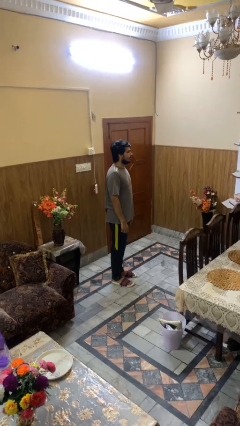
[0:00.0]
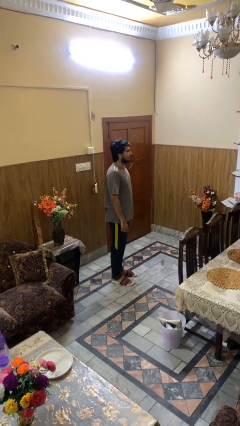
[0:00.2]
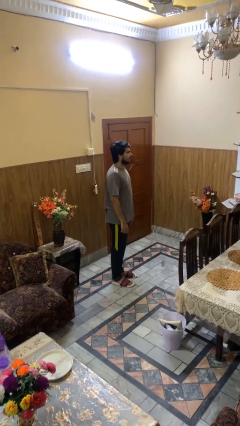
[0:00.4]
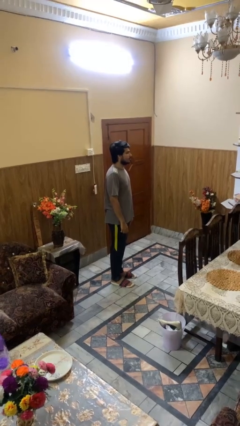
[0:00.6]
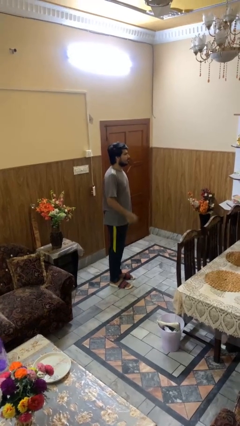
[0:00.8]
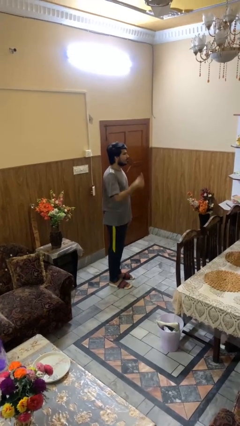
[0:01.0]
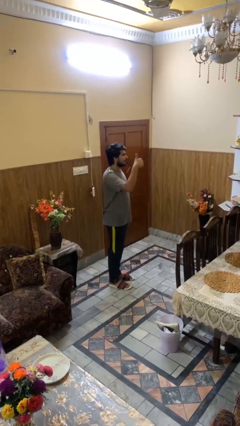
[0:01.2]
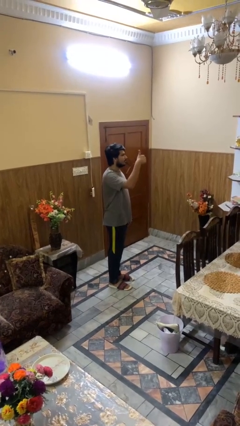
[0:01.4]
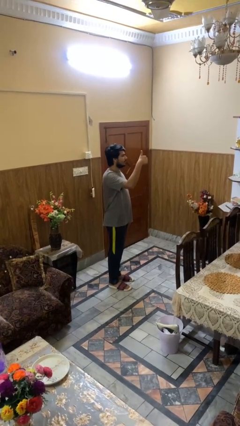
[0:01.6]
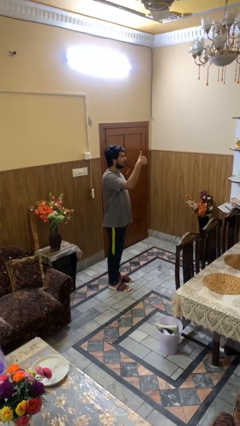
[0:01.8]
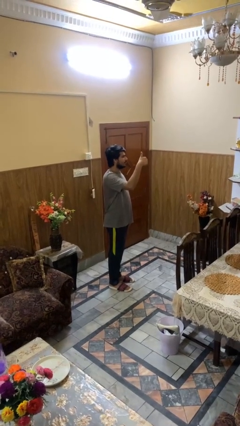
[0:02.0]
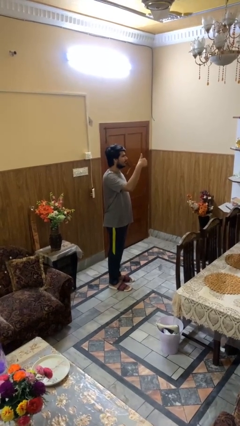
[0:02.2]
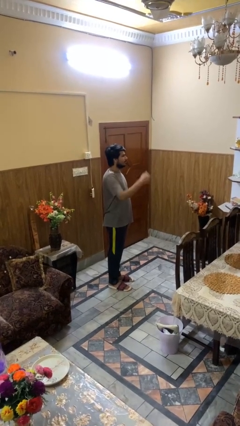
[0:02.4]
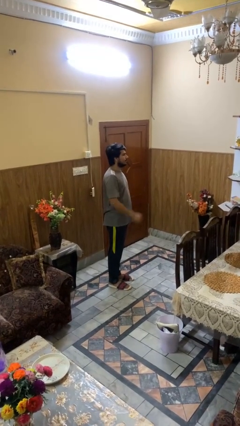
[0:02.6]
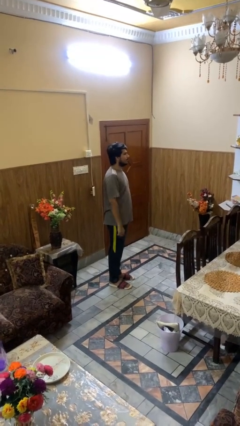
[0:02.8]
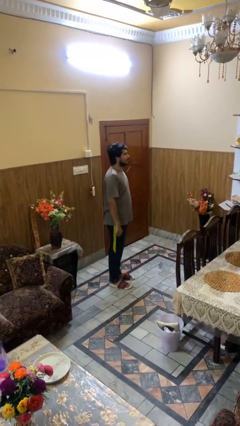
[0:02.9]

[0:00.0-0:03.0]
person gestures thumbs up

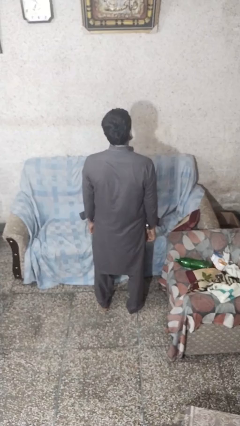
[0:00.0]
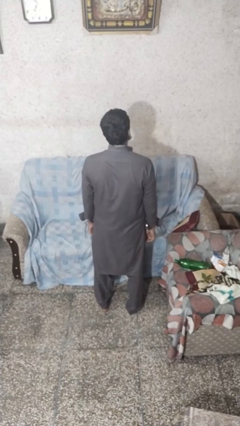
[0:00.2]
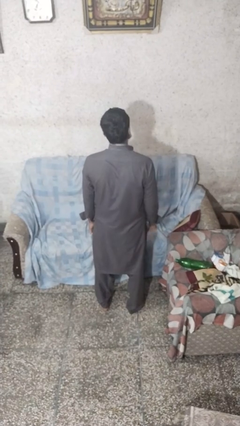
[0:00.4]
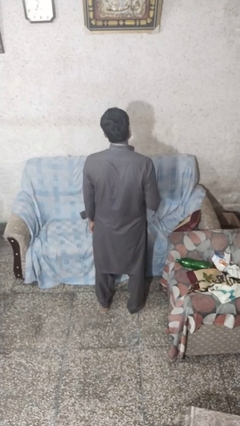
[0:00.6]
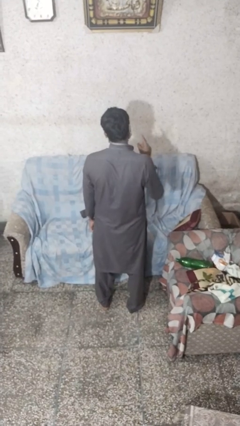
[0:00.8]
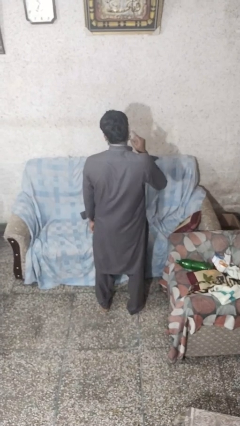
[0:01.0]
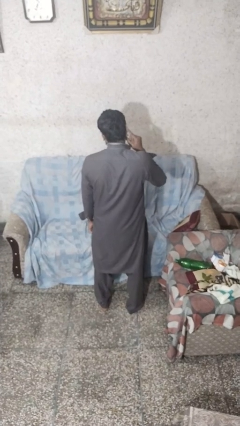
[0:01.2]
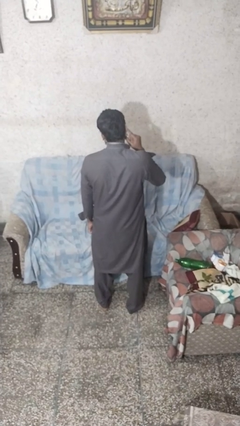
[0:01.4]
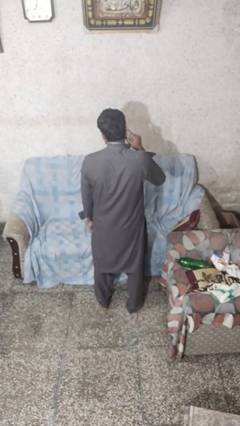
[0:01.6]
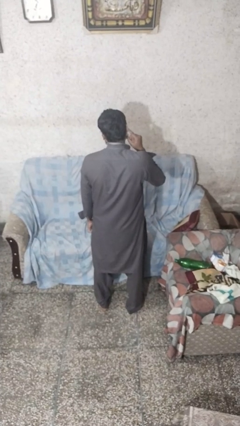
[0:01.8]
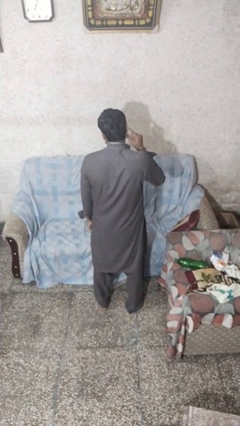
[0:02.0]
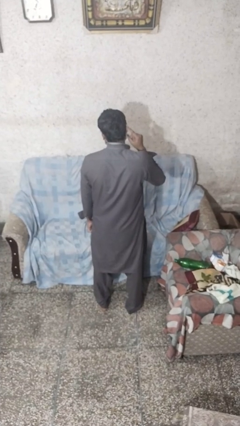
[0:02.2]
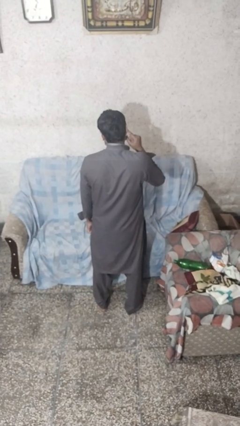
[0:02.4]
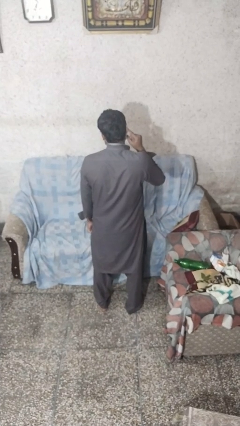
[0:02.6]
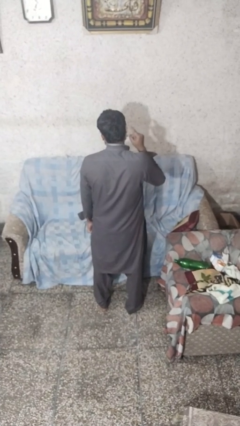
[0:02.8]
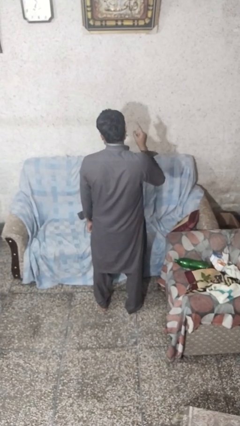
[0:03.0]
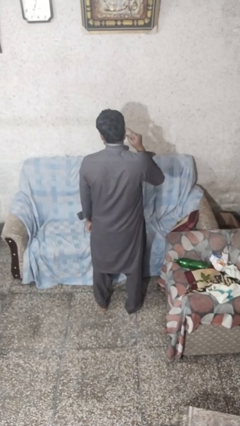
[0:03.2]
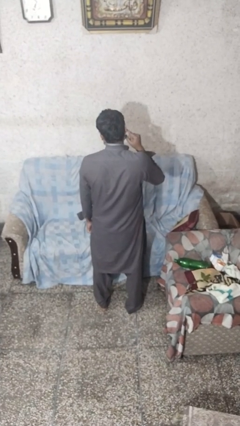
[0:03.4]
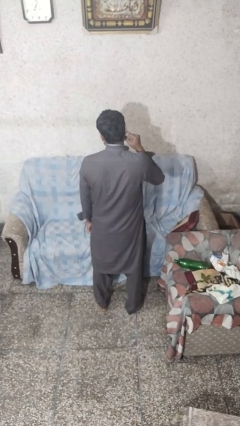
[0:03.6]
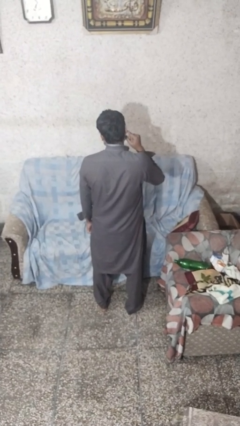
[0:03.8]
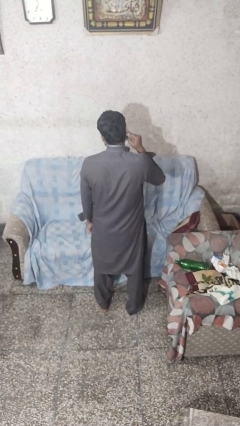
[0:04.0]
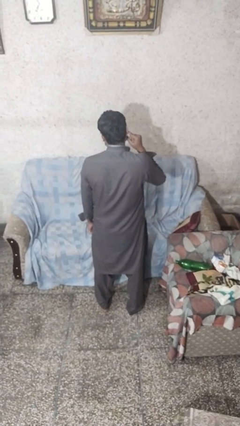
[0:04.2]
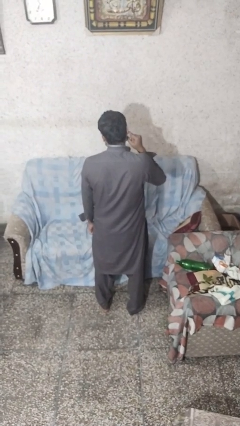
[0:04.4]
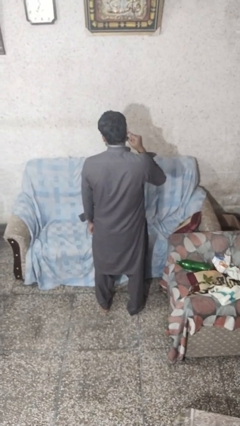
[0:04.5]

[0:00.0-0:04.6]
person gestures listen closely

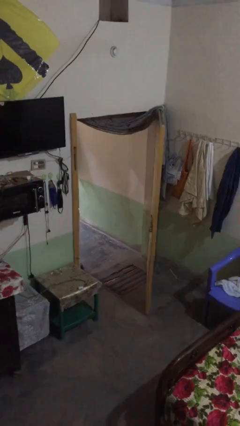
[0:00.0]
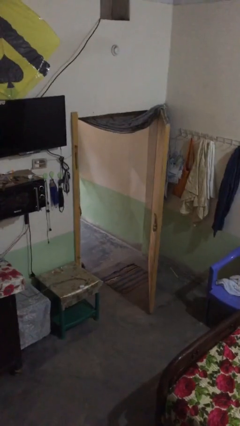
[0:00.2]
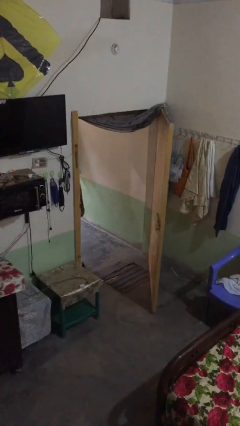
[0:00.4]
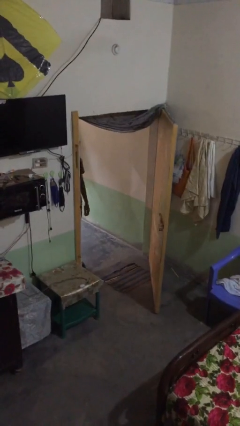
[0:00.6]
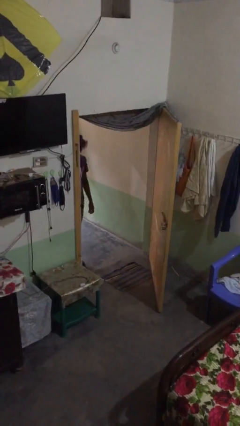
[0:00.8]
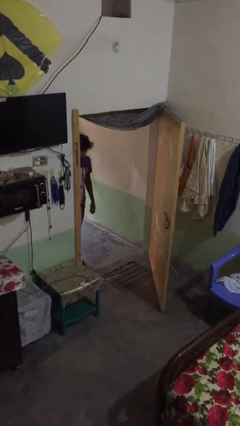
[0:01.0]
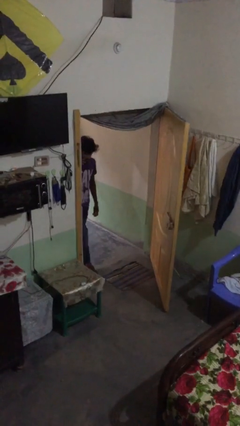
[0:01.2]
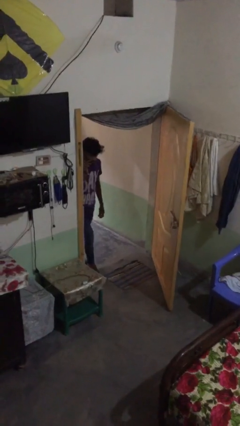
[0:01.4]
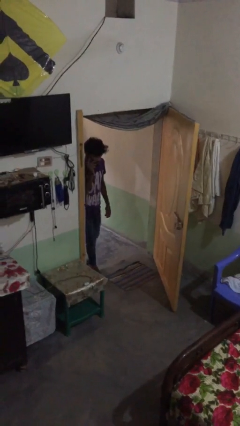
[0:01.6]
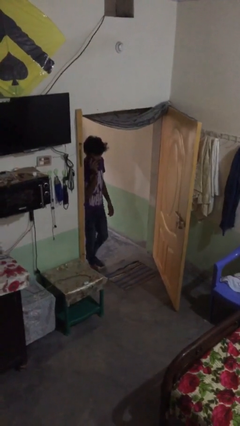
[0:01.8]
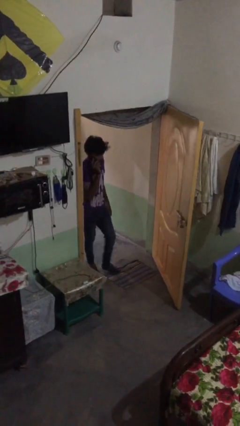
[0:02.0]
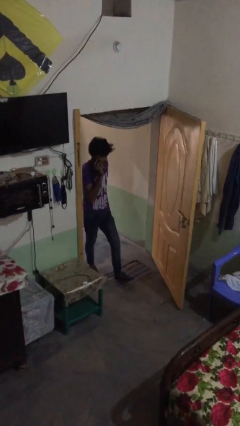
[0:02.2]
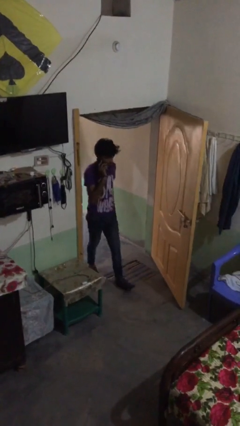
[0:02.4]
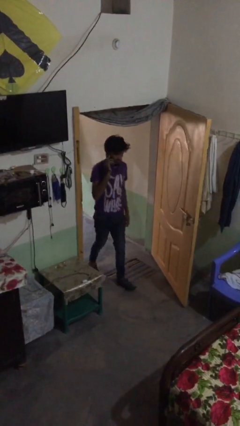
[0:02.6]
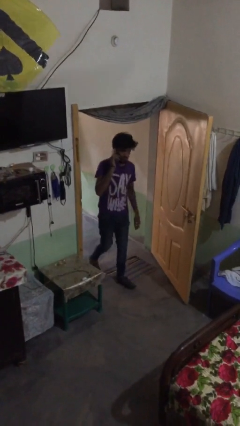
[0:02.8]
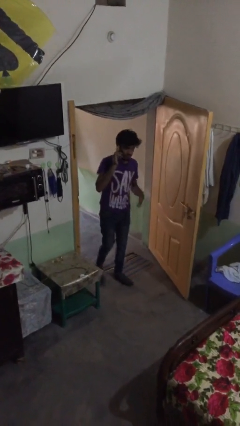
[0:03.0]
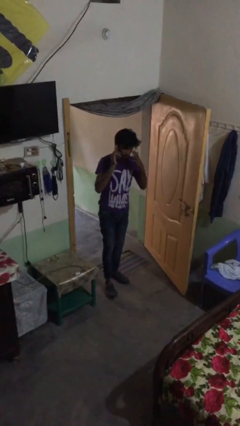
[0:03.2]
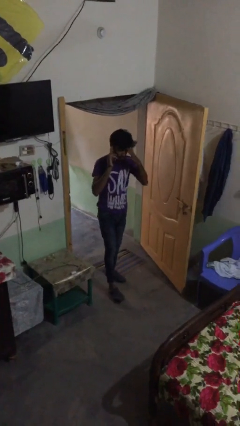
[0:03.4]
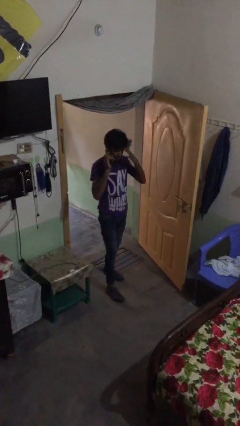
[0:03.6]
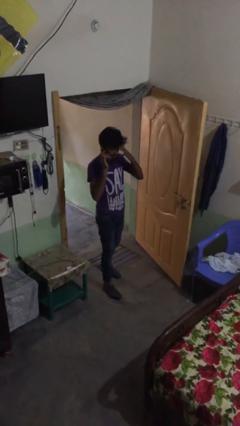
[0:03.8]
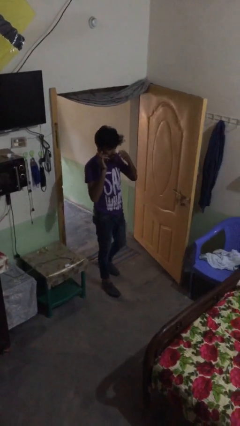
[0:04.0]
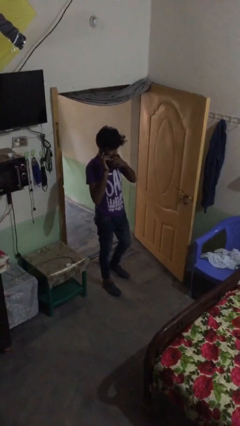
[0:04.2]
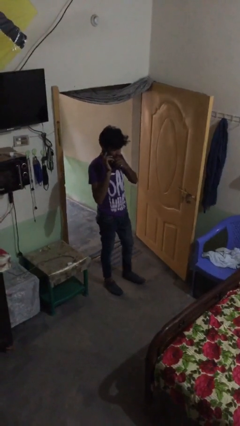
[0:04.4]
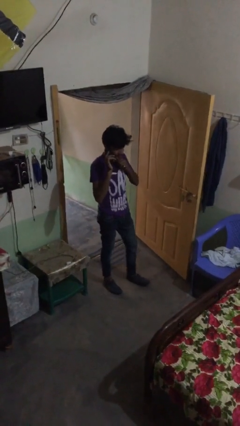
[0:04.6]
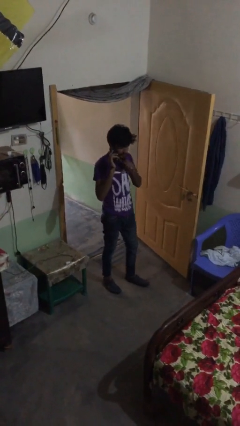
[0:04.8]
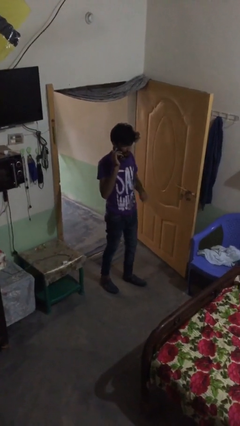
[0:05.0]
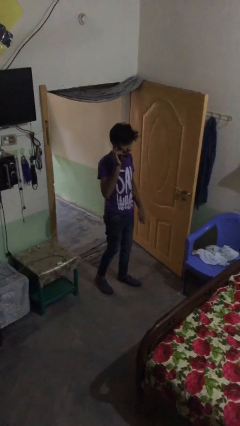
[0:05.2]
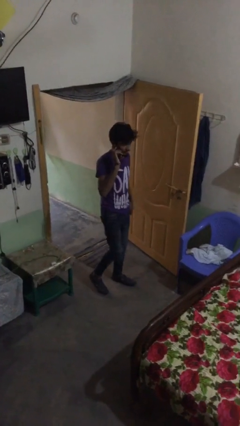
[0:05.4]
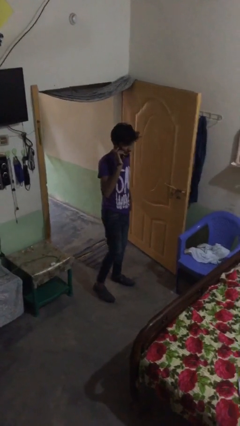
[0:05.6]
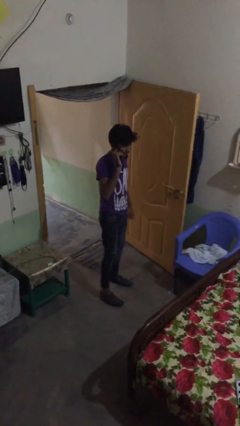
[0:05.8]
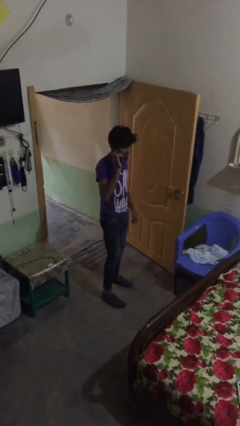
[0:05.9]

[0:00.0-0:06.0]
person enters scene through structure

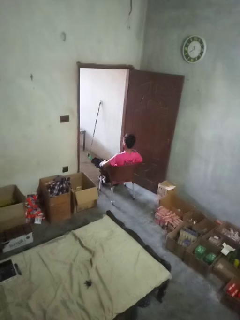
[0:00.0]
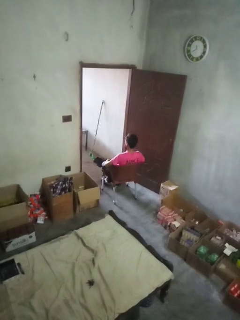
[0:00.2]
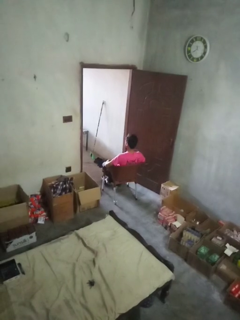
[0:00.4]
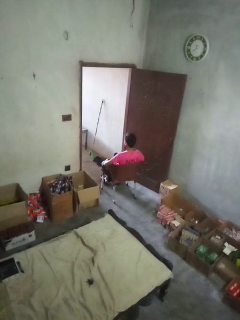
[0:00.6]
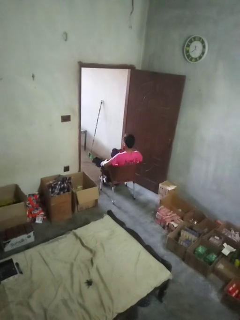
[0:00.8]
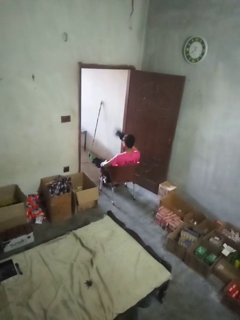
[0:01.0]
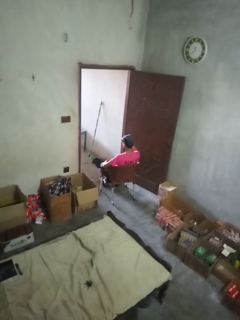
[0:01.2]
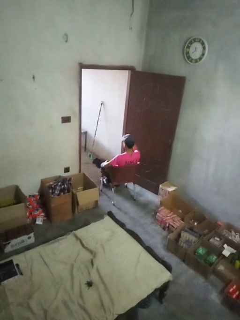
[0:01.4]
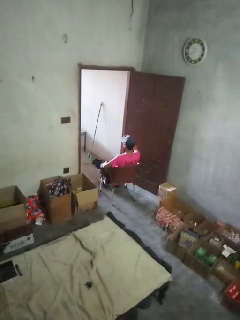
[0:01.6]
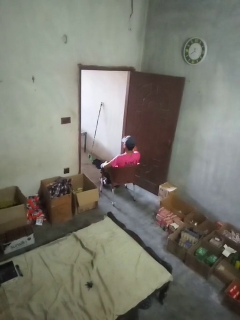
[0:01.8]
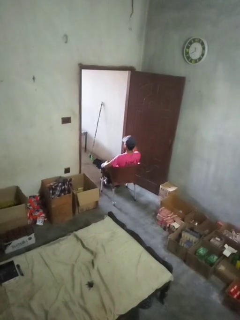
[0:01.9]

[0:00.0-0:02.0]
person puts on hat

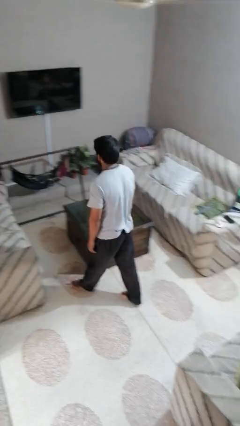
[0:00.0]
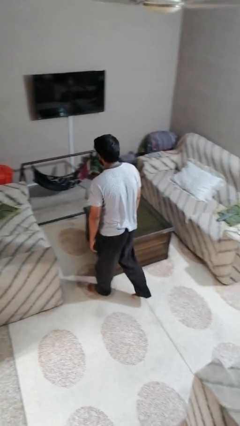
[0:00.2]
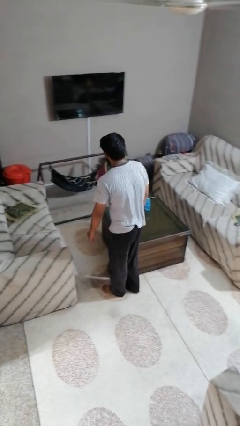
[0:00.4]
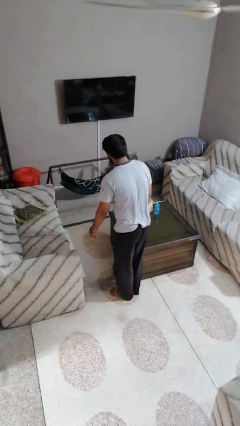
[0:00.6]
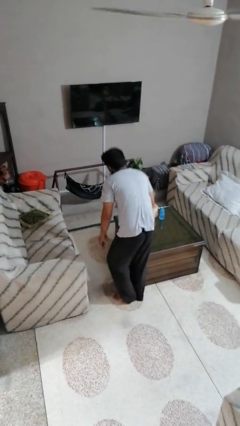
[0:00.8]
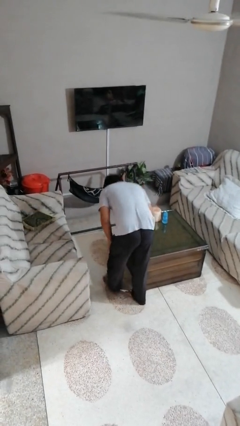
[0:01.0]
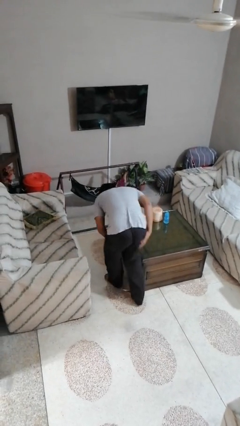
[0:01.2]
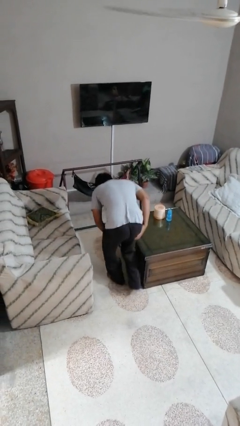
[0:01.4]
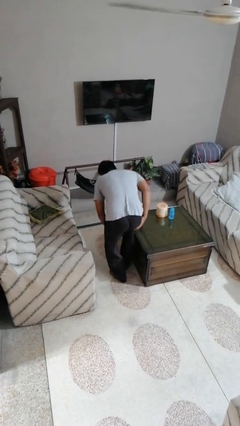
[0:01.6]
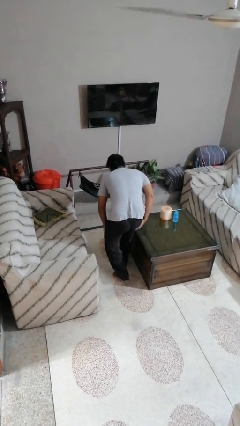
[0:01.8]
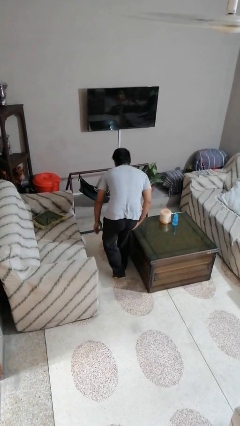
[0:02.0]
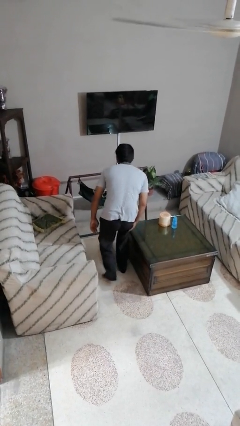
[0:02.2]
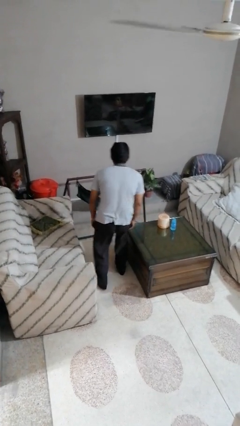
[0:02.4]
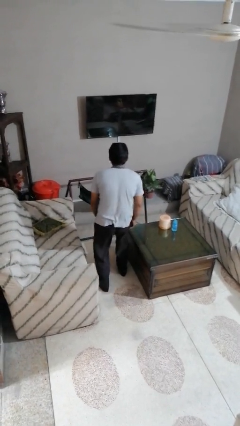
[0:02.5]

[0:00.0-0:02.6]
person bumps into table
